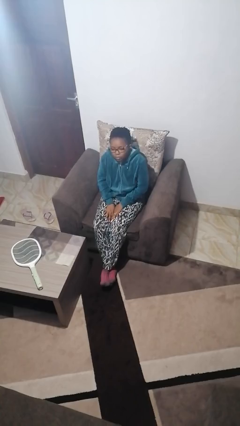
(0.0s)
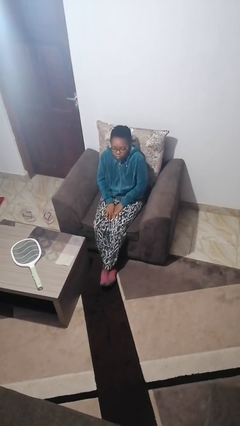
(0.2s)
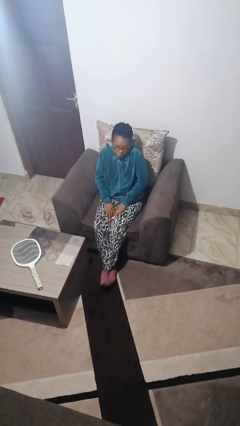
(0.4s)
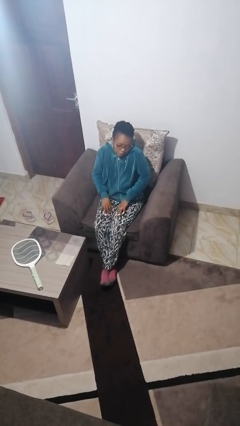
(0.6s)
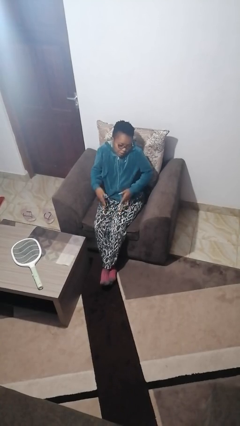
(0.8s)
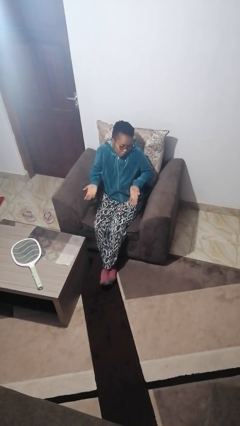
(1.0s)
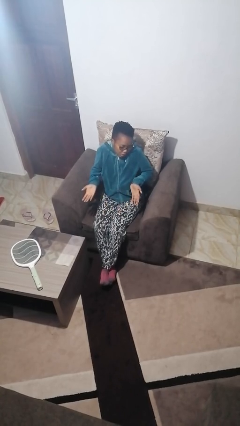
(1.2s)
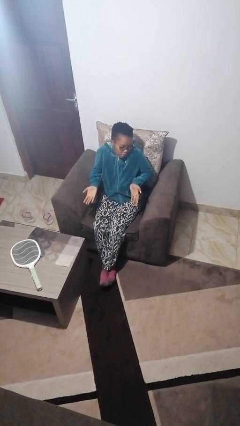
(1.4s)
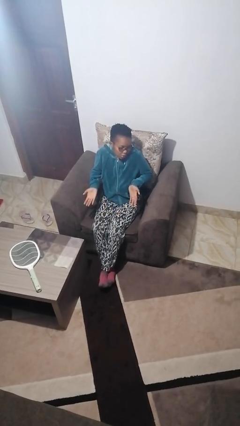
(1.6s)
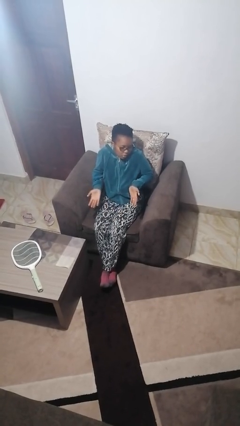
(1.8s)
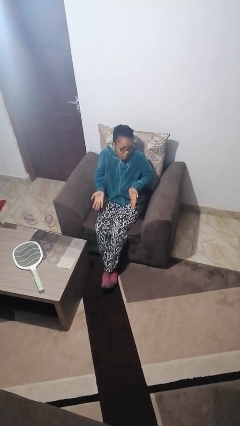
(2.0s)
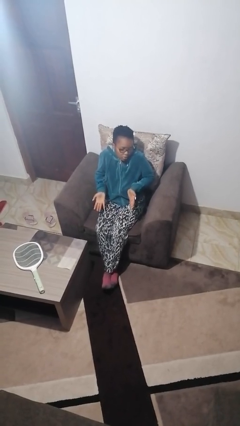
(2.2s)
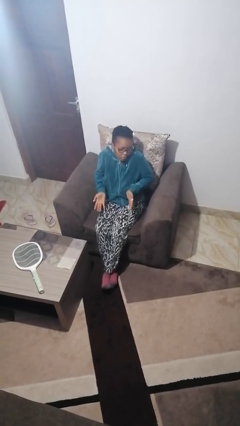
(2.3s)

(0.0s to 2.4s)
person shrugs

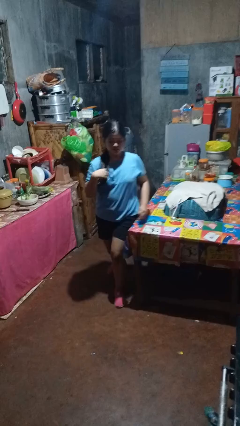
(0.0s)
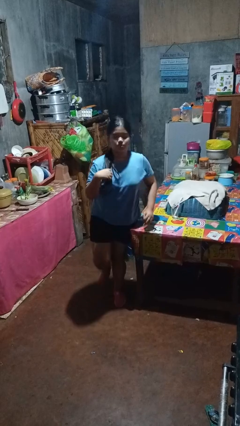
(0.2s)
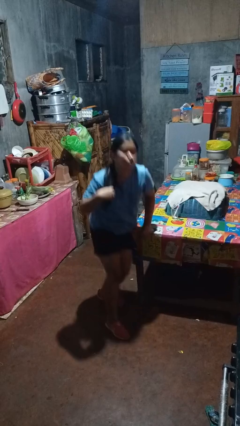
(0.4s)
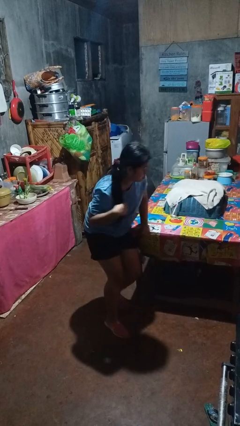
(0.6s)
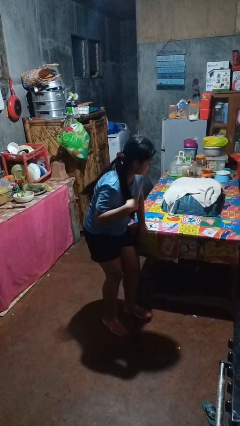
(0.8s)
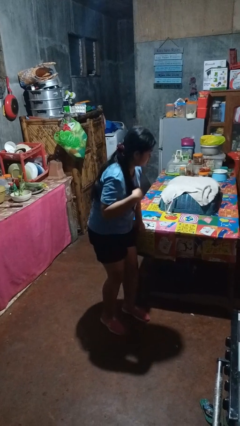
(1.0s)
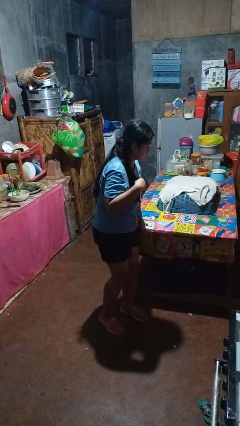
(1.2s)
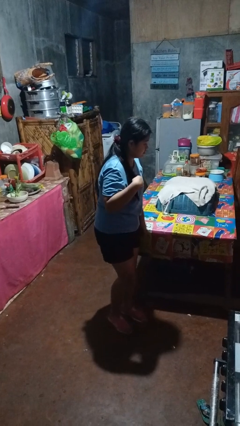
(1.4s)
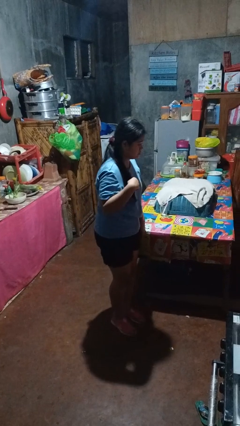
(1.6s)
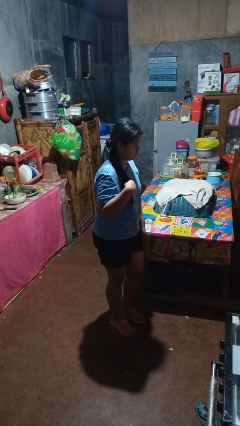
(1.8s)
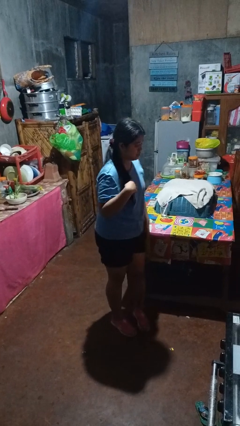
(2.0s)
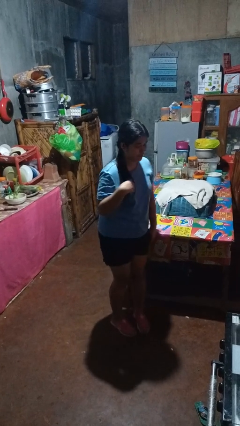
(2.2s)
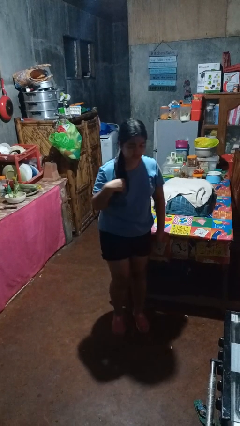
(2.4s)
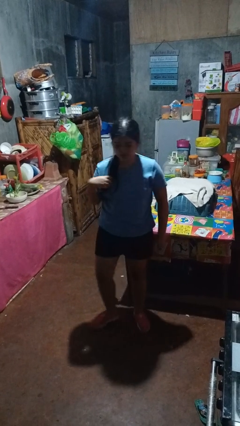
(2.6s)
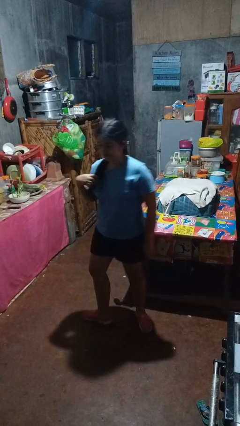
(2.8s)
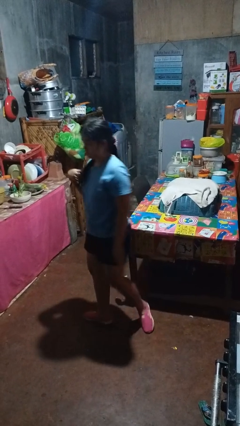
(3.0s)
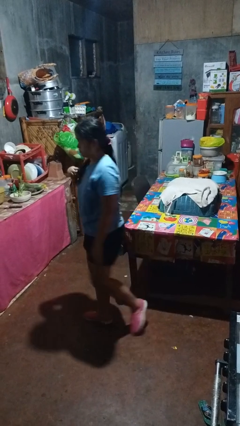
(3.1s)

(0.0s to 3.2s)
person bumps into table

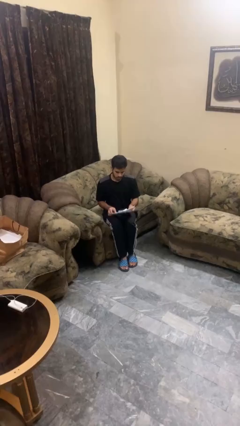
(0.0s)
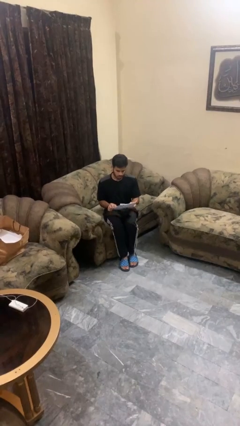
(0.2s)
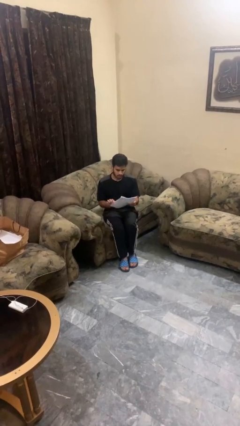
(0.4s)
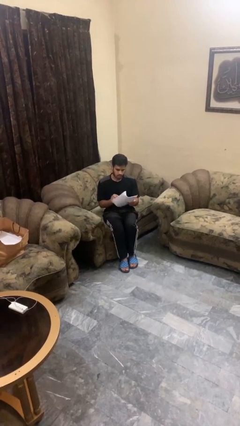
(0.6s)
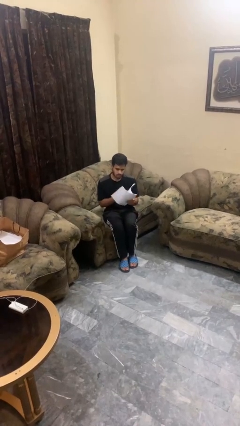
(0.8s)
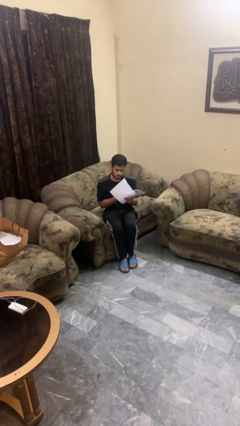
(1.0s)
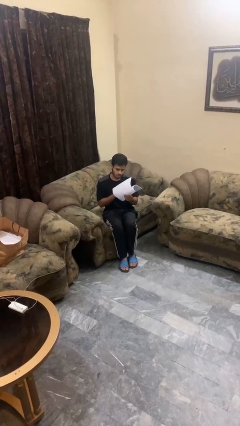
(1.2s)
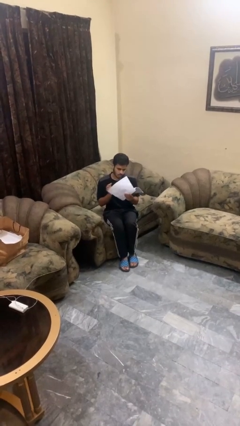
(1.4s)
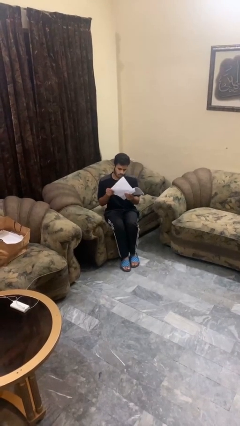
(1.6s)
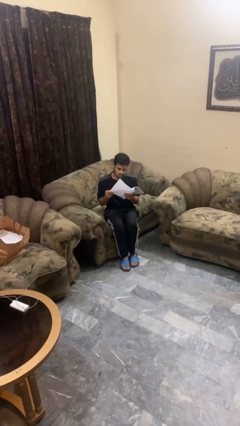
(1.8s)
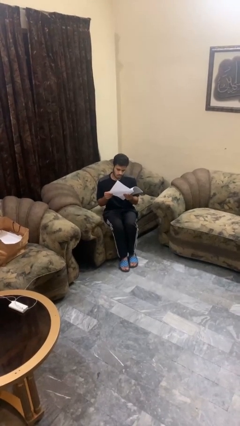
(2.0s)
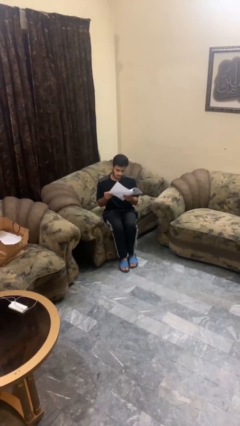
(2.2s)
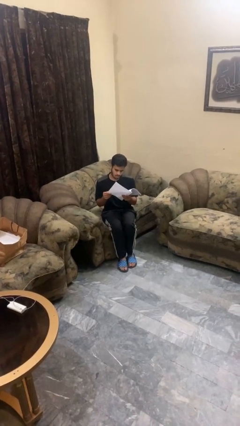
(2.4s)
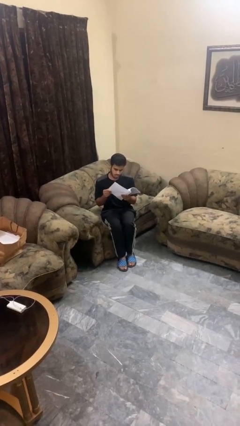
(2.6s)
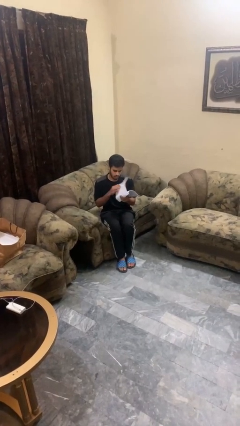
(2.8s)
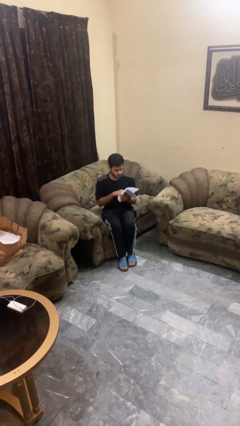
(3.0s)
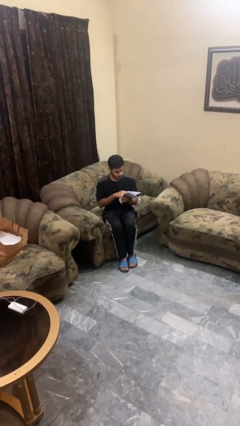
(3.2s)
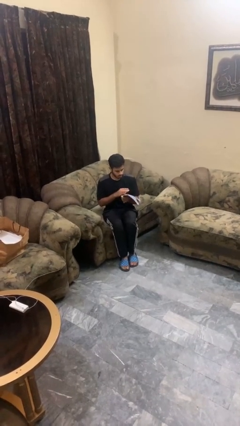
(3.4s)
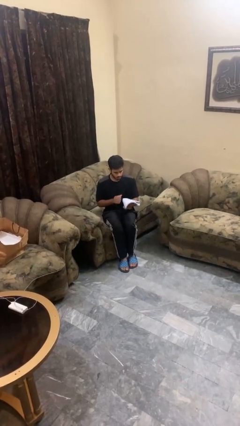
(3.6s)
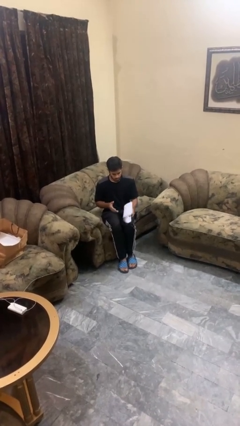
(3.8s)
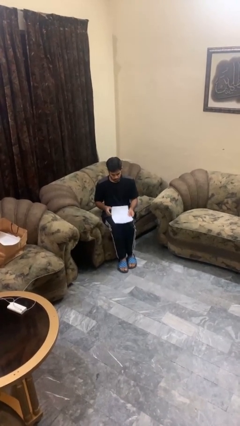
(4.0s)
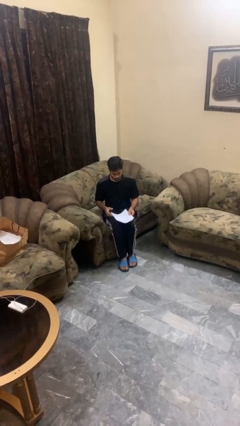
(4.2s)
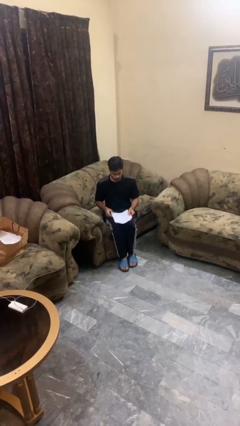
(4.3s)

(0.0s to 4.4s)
person reads magazine

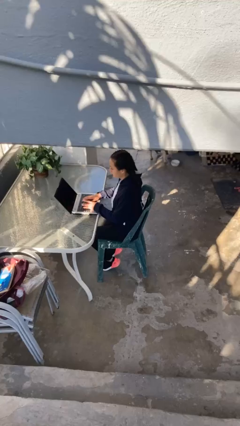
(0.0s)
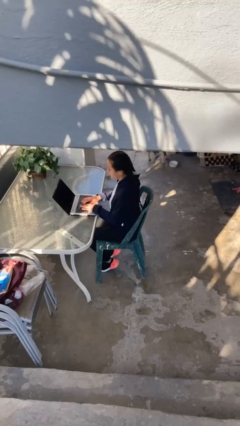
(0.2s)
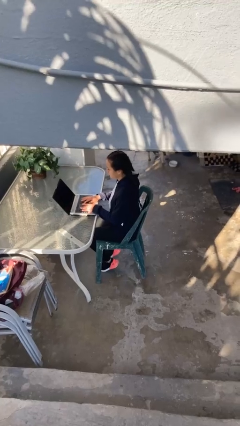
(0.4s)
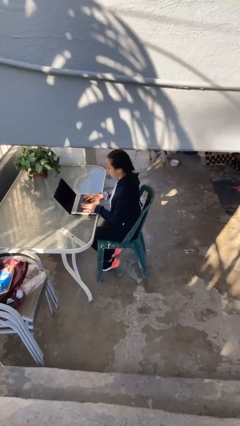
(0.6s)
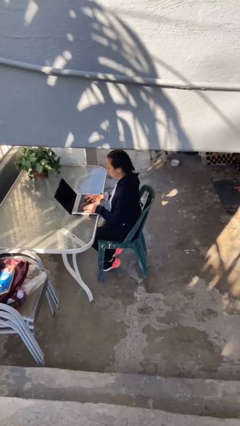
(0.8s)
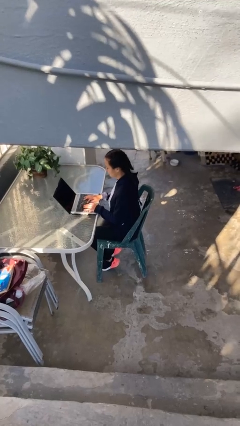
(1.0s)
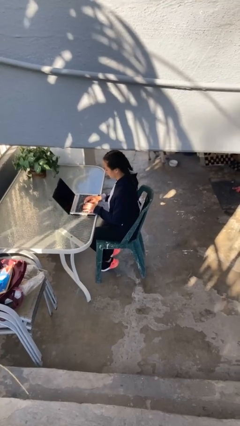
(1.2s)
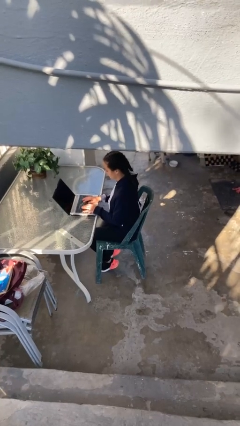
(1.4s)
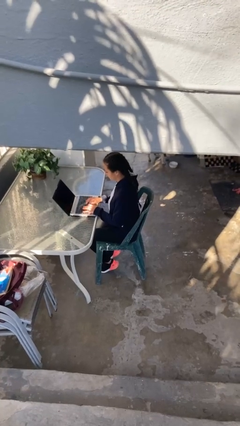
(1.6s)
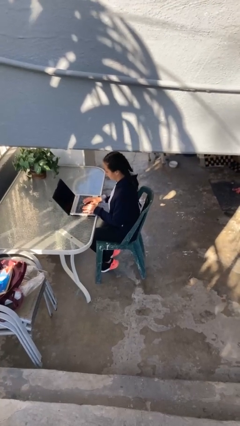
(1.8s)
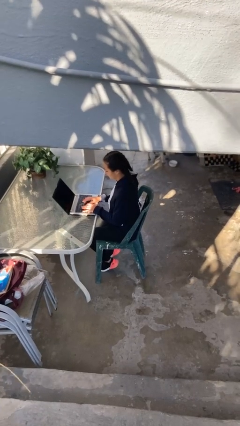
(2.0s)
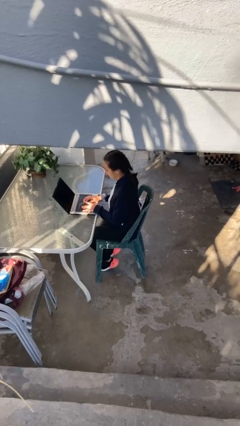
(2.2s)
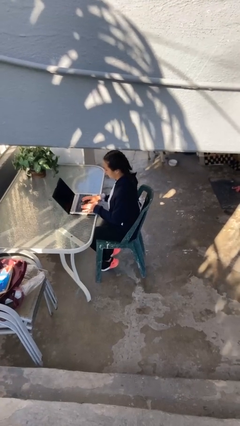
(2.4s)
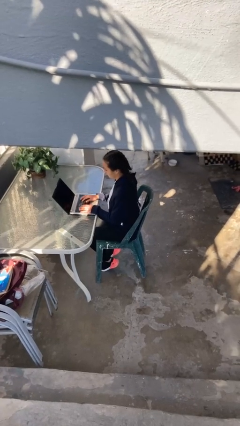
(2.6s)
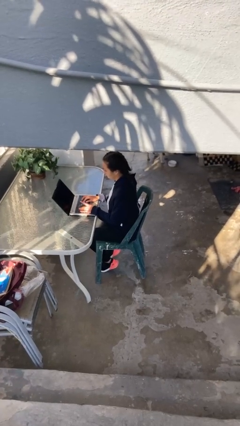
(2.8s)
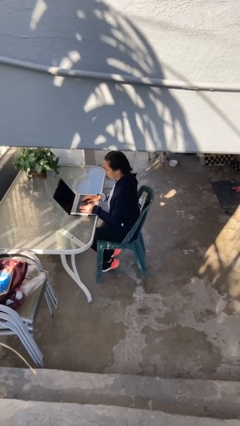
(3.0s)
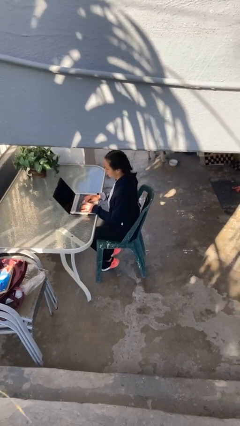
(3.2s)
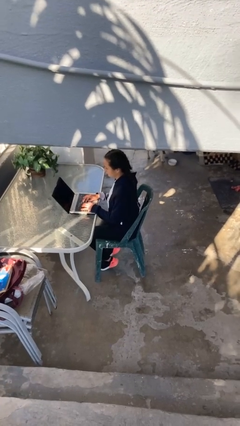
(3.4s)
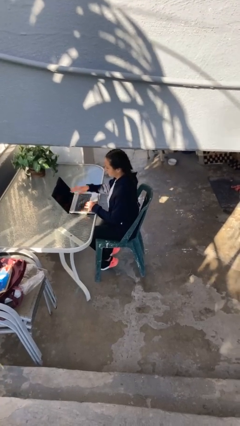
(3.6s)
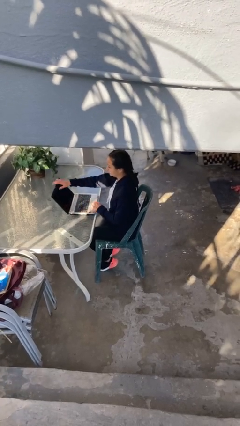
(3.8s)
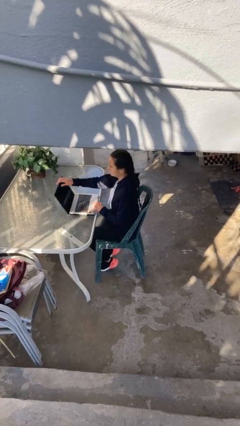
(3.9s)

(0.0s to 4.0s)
person interacts with laptop

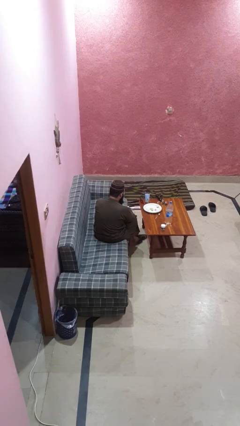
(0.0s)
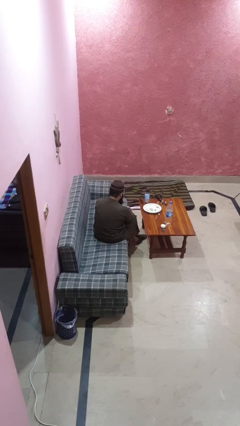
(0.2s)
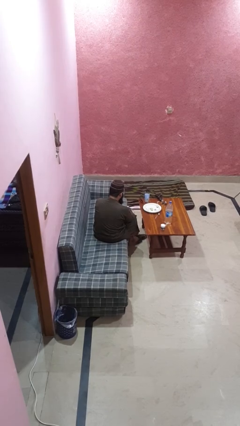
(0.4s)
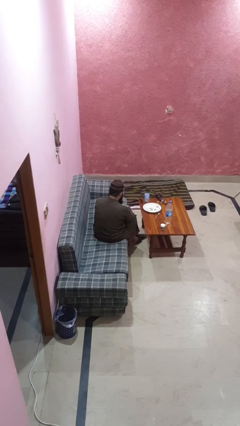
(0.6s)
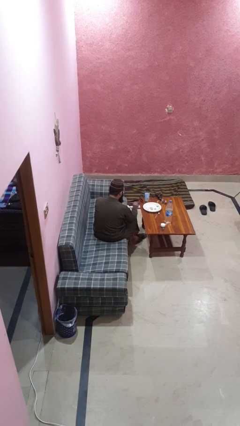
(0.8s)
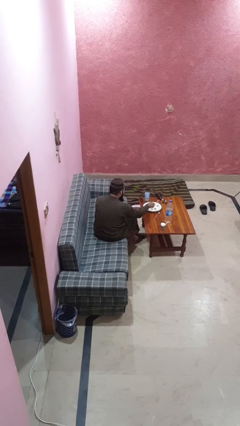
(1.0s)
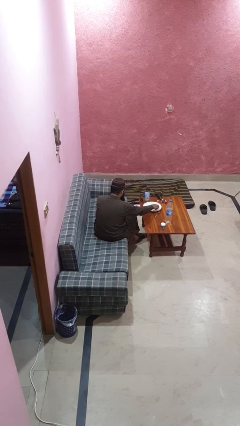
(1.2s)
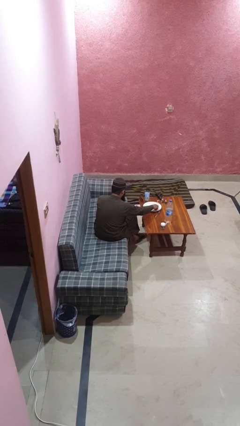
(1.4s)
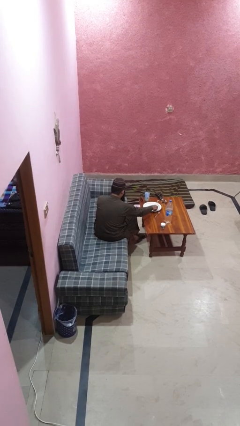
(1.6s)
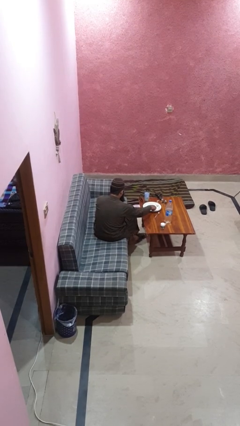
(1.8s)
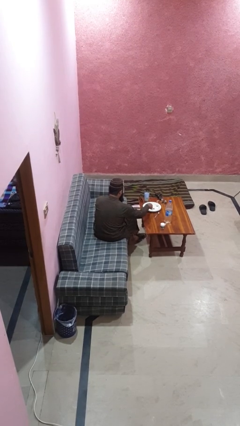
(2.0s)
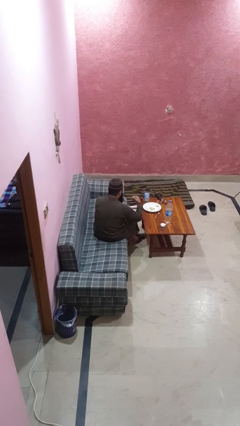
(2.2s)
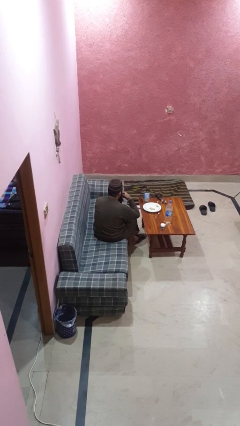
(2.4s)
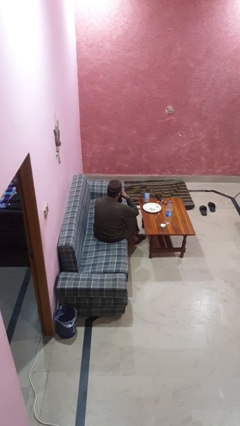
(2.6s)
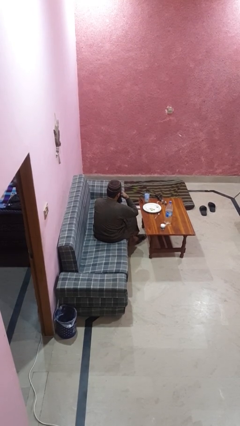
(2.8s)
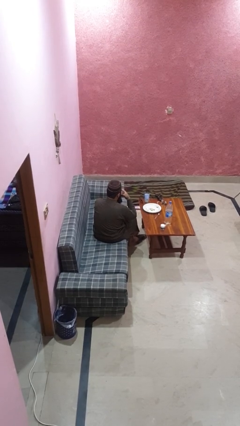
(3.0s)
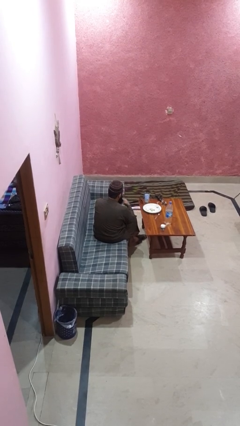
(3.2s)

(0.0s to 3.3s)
person eats with hands

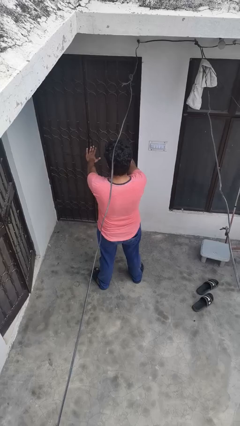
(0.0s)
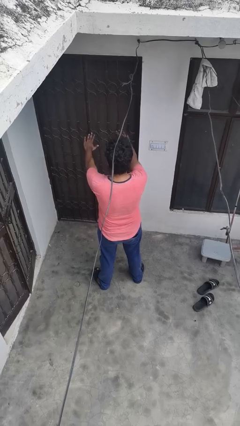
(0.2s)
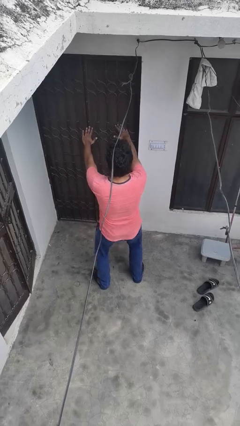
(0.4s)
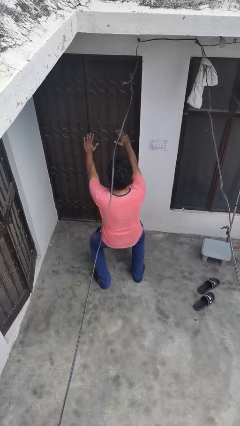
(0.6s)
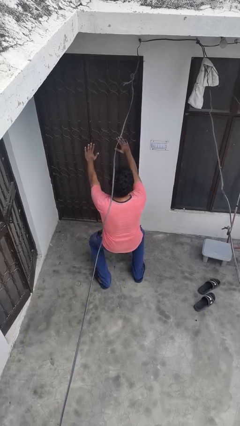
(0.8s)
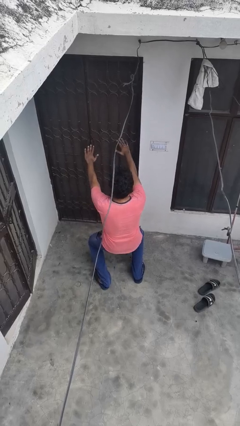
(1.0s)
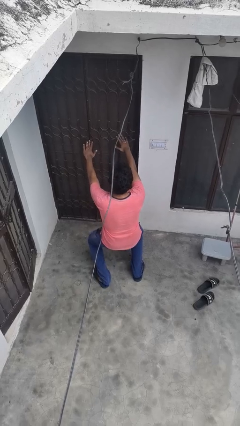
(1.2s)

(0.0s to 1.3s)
person squats
